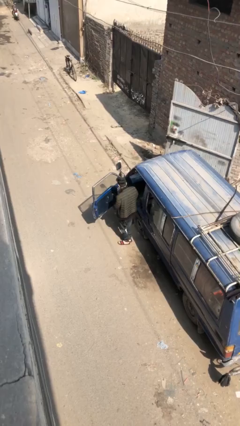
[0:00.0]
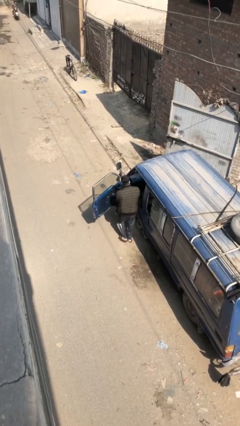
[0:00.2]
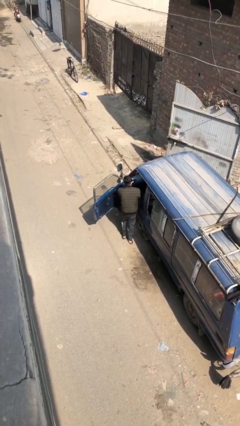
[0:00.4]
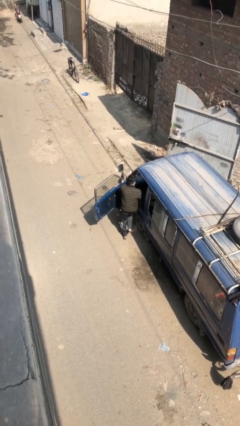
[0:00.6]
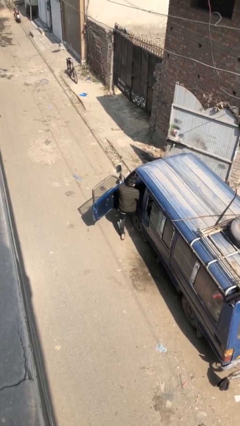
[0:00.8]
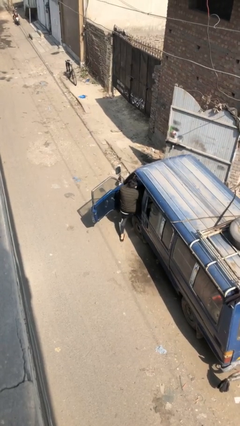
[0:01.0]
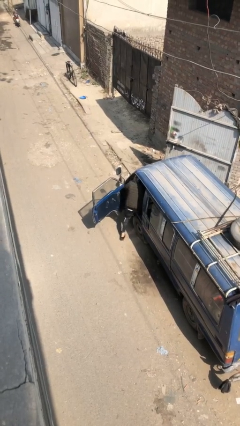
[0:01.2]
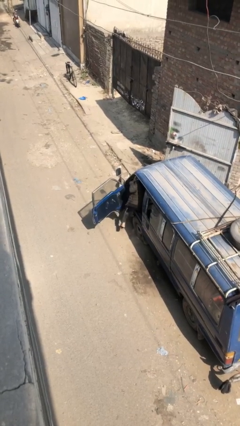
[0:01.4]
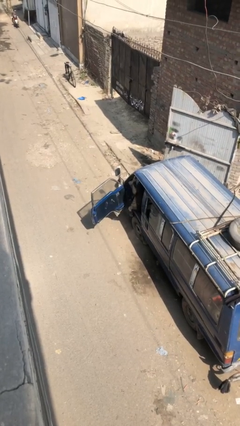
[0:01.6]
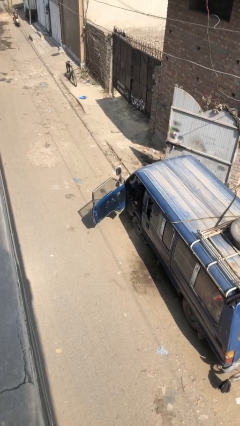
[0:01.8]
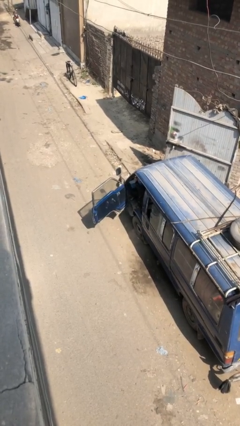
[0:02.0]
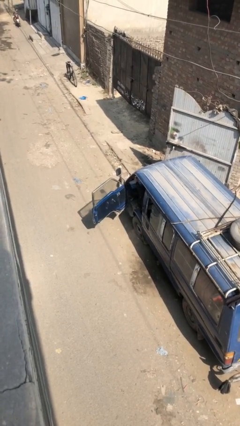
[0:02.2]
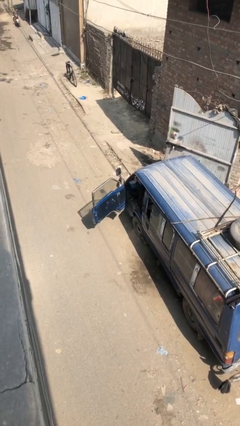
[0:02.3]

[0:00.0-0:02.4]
person enters car

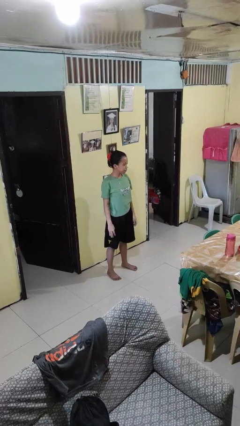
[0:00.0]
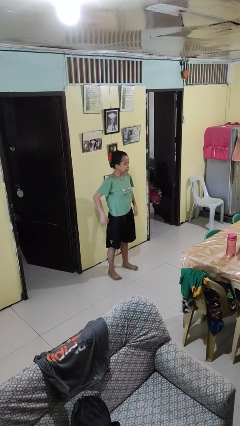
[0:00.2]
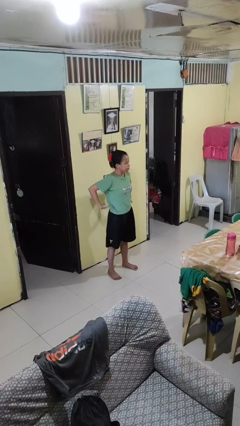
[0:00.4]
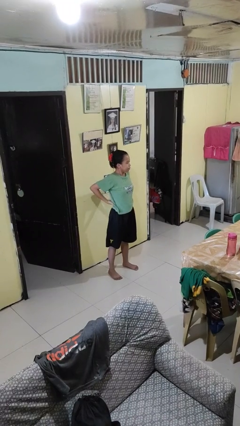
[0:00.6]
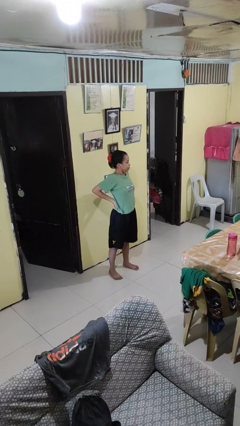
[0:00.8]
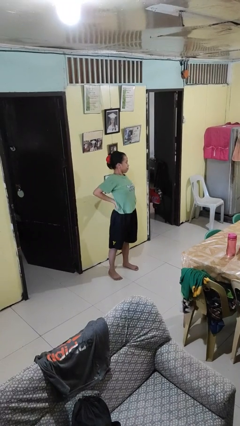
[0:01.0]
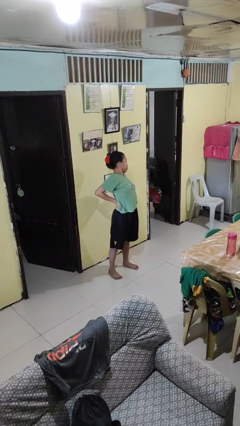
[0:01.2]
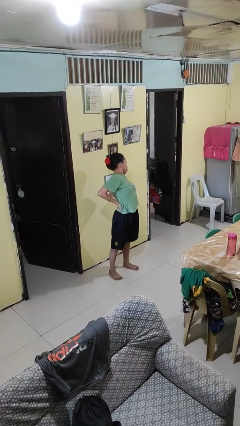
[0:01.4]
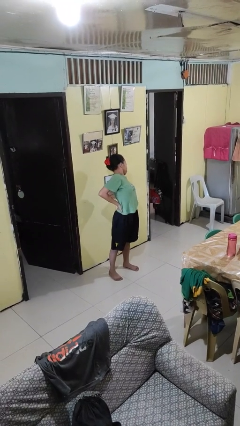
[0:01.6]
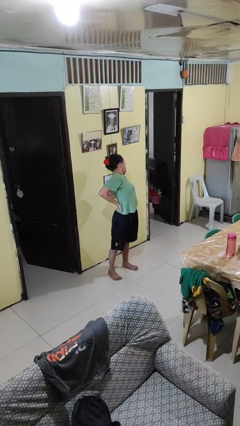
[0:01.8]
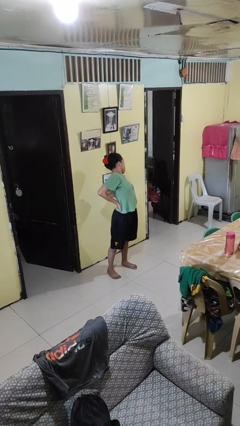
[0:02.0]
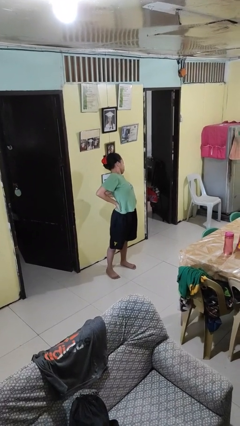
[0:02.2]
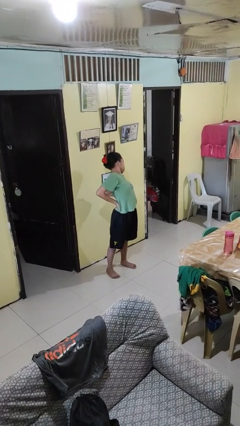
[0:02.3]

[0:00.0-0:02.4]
person stretches back

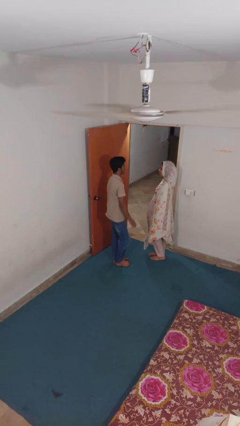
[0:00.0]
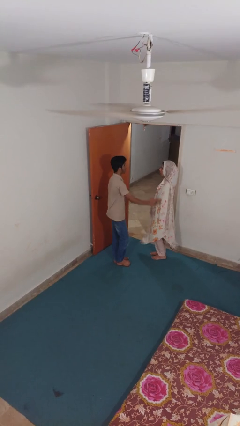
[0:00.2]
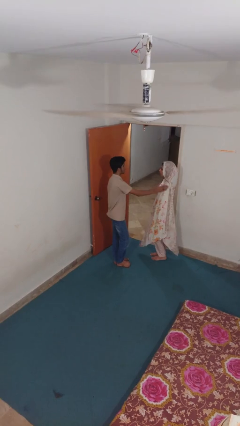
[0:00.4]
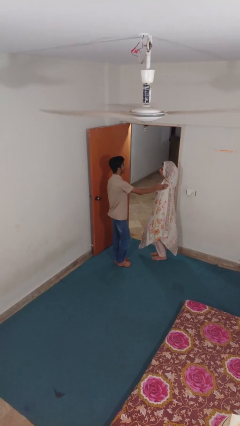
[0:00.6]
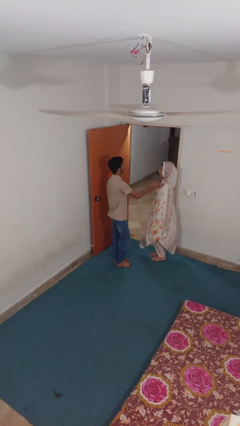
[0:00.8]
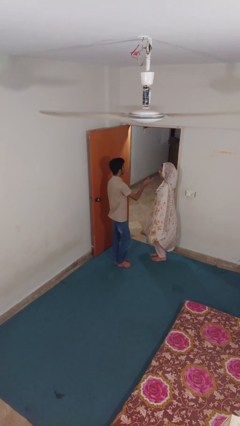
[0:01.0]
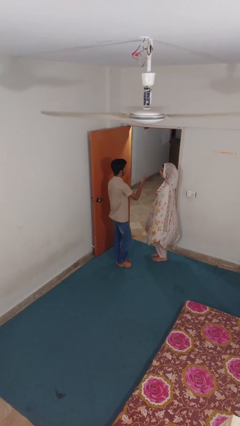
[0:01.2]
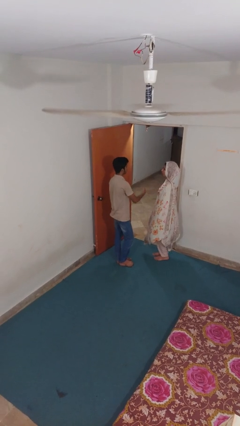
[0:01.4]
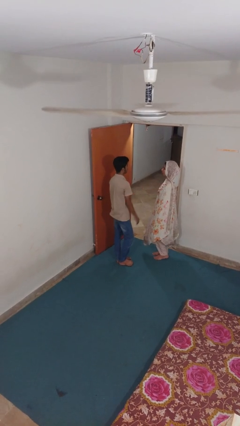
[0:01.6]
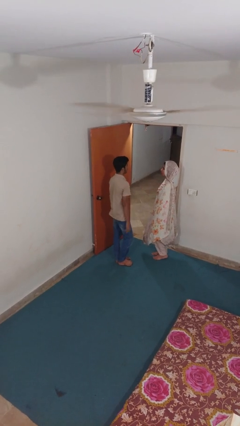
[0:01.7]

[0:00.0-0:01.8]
person shoves person

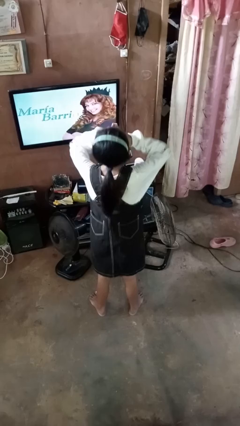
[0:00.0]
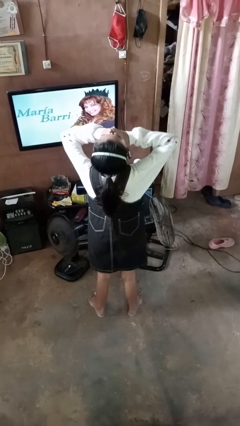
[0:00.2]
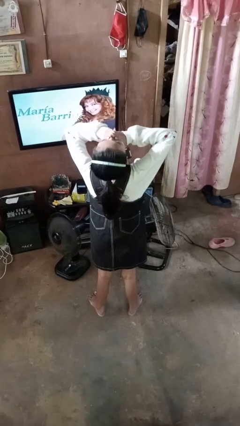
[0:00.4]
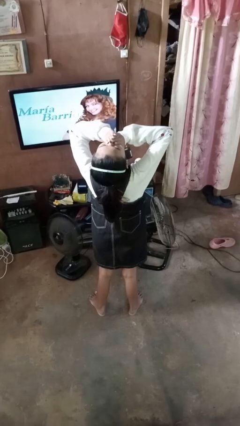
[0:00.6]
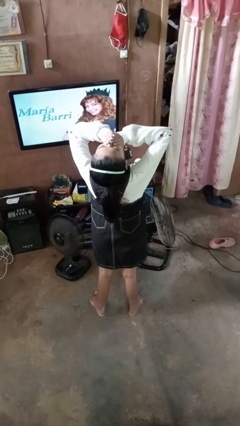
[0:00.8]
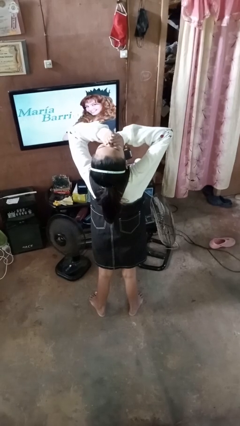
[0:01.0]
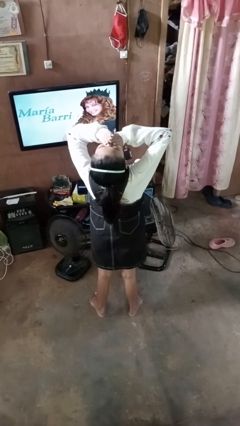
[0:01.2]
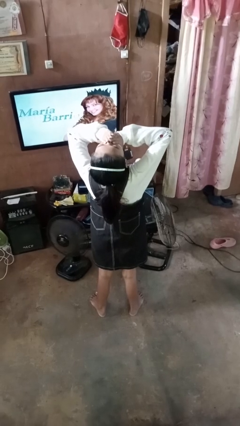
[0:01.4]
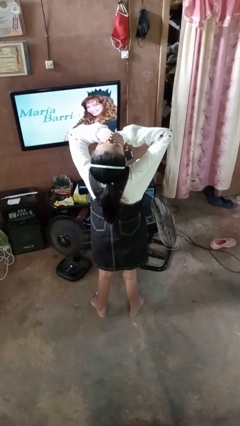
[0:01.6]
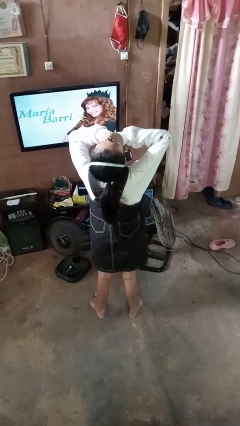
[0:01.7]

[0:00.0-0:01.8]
person yawns

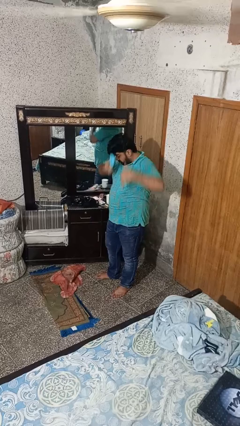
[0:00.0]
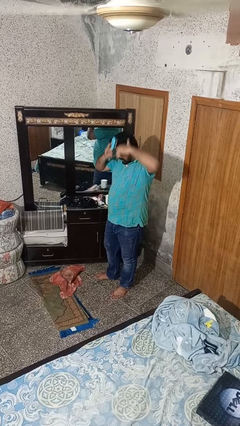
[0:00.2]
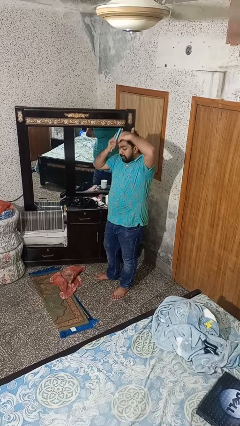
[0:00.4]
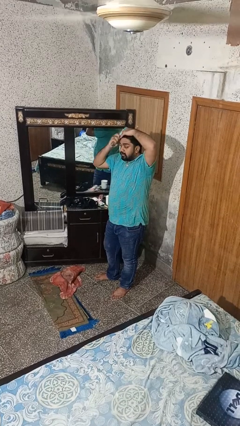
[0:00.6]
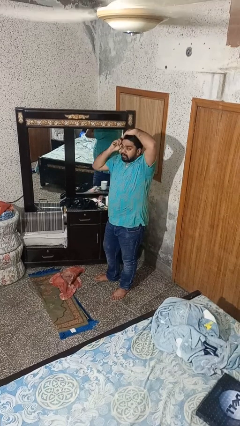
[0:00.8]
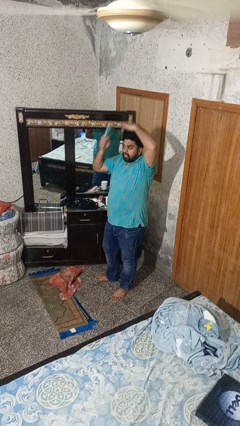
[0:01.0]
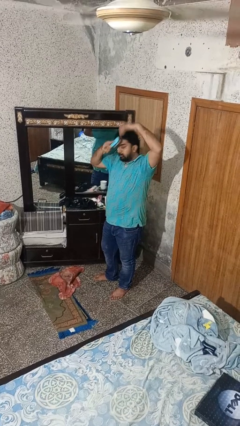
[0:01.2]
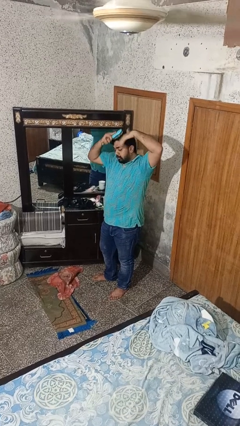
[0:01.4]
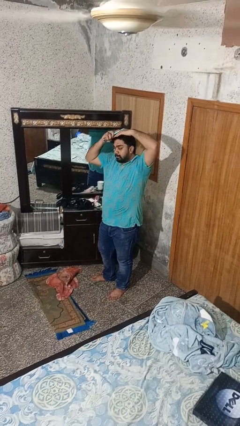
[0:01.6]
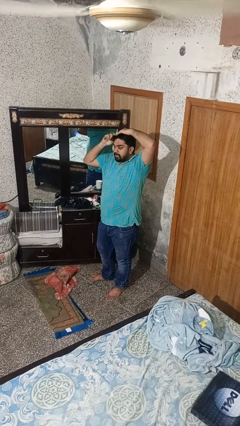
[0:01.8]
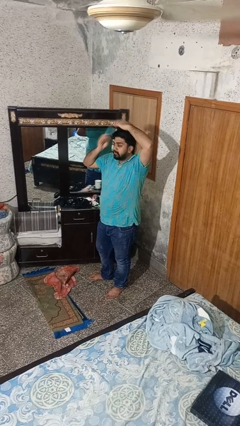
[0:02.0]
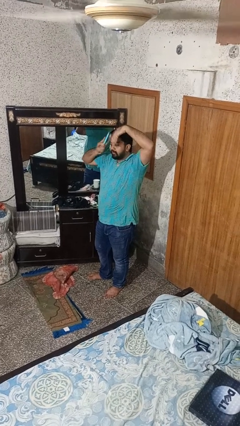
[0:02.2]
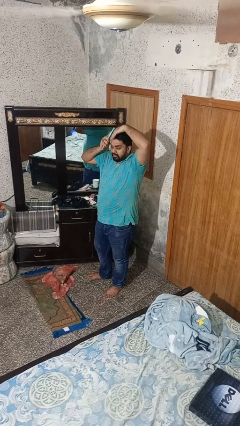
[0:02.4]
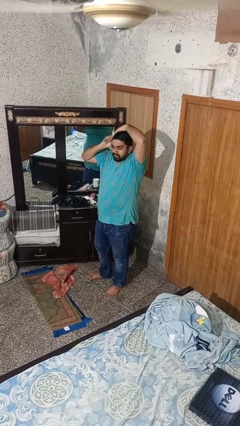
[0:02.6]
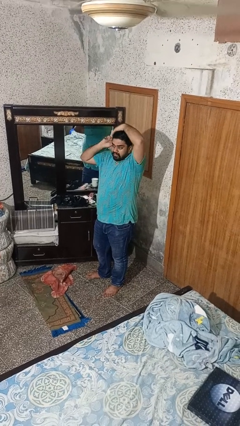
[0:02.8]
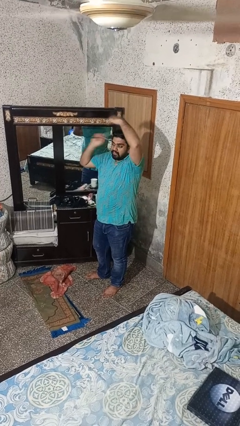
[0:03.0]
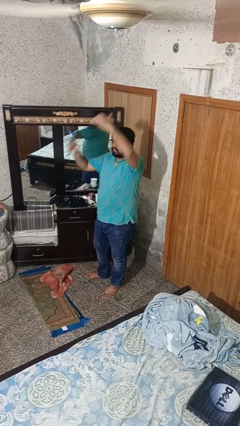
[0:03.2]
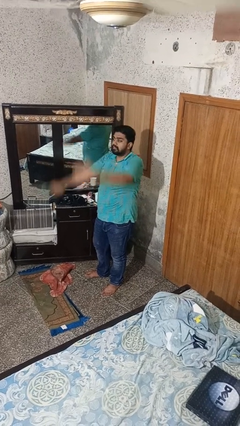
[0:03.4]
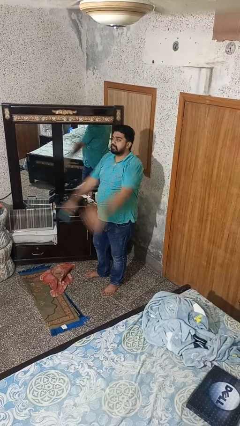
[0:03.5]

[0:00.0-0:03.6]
person brushes hair

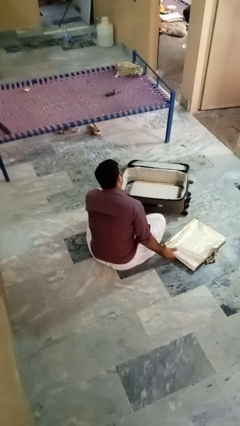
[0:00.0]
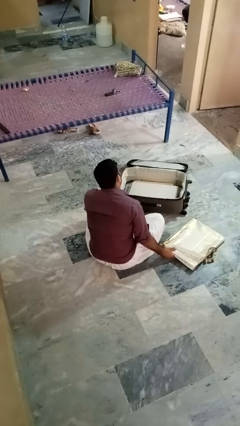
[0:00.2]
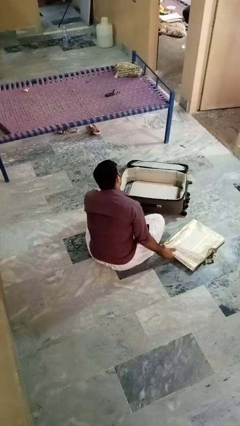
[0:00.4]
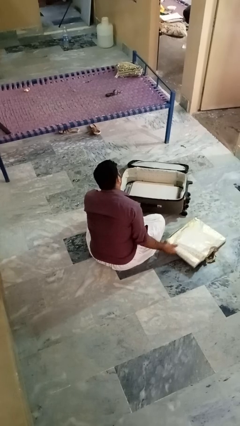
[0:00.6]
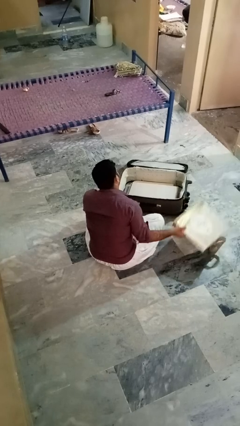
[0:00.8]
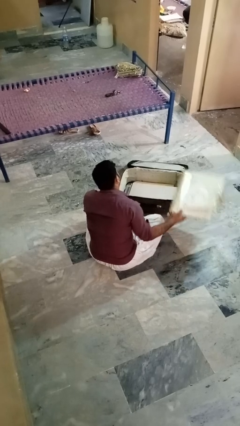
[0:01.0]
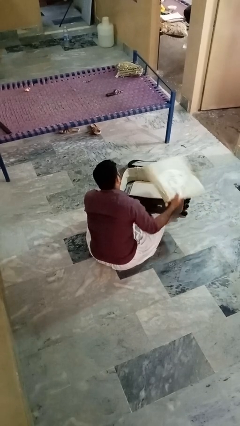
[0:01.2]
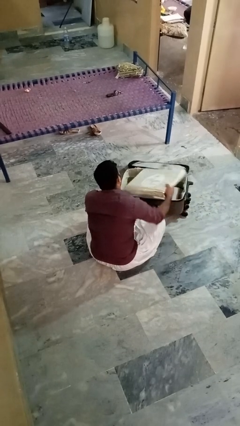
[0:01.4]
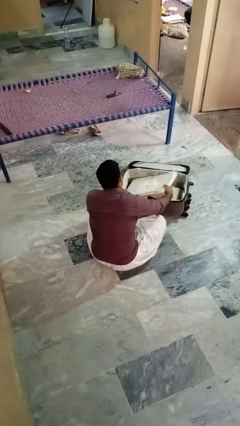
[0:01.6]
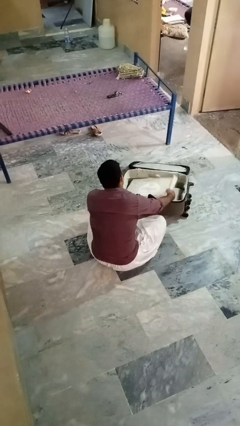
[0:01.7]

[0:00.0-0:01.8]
person puts object into bag

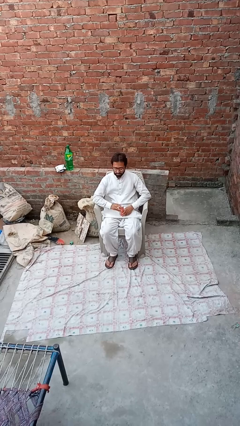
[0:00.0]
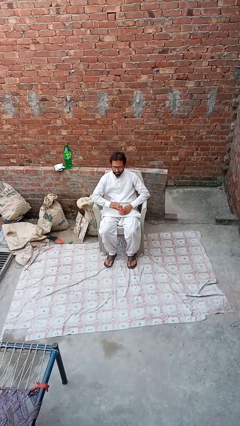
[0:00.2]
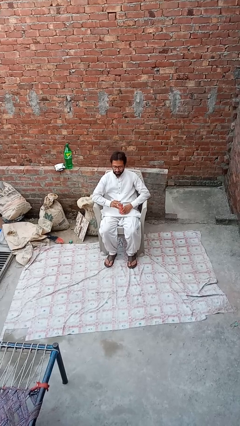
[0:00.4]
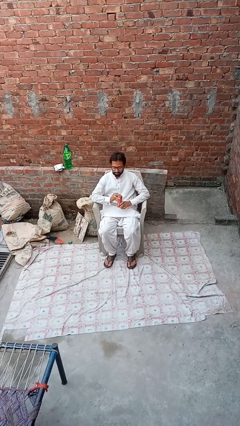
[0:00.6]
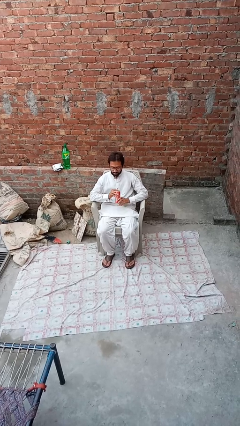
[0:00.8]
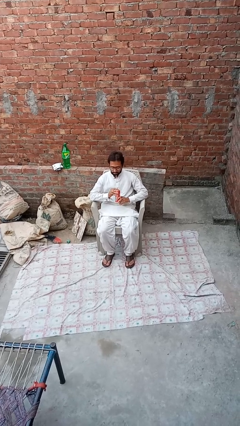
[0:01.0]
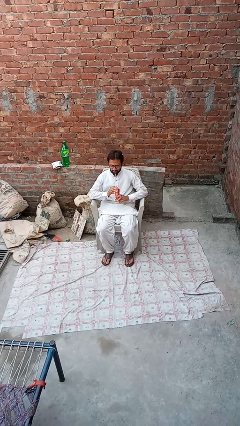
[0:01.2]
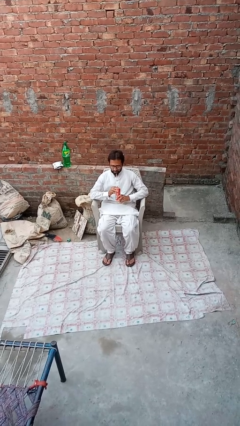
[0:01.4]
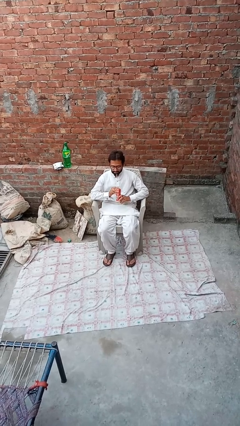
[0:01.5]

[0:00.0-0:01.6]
person drinks from straw

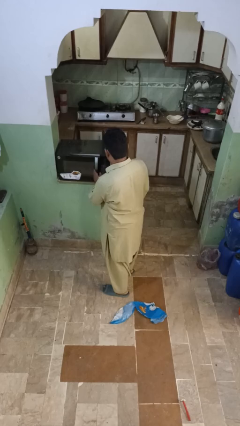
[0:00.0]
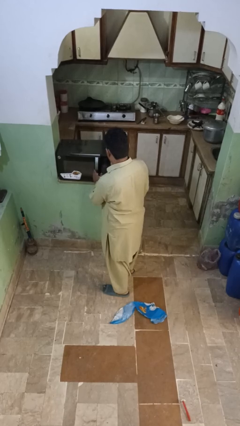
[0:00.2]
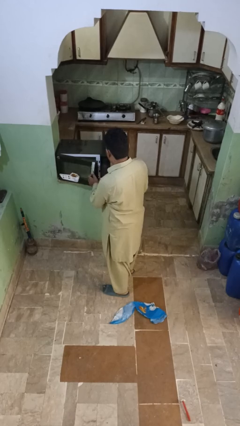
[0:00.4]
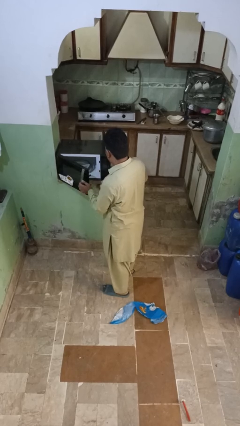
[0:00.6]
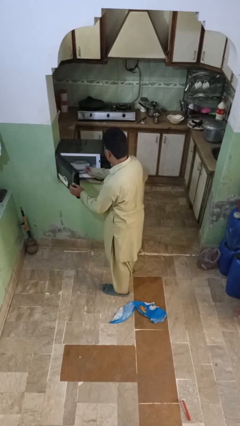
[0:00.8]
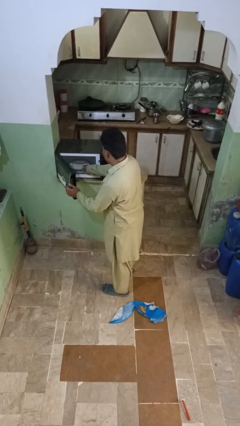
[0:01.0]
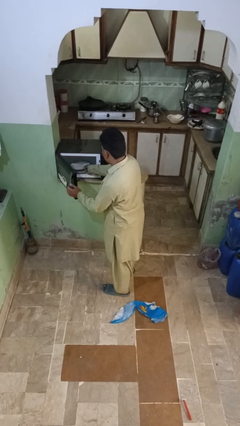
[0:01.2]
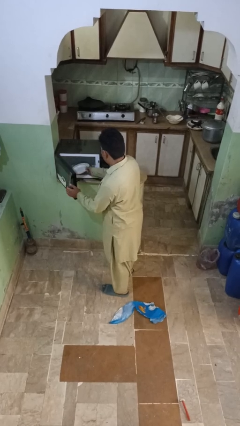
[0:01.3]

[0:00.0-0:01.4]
person takes object from microwave
